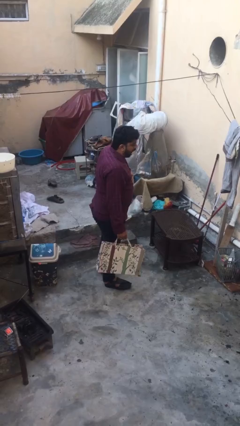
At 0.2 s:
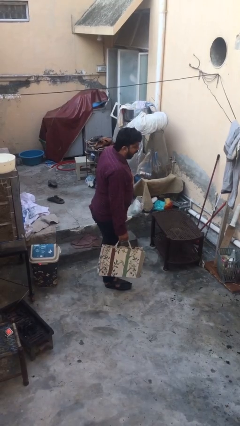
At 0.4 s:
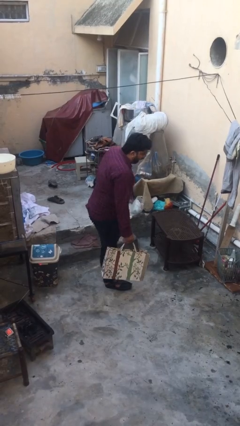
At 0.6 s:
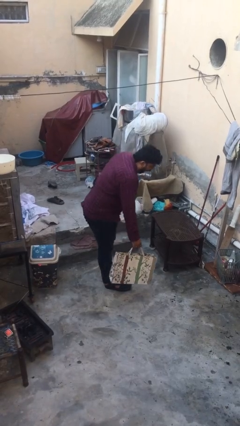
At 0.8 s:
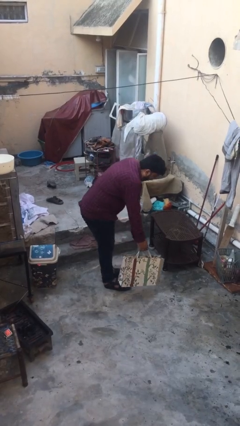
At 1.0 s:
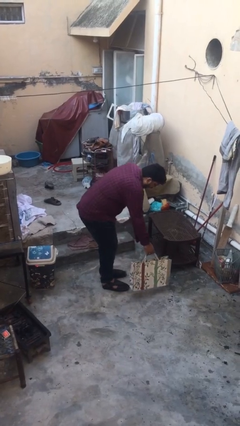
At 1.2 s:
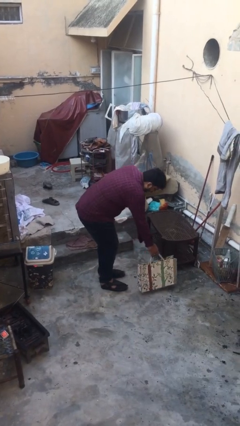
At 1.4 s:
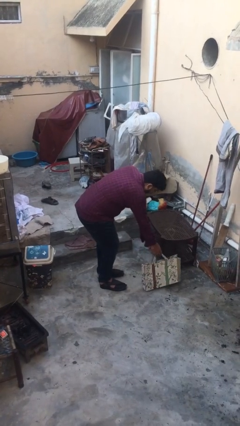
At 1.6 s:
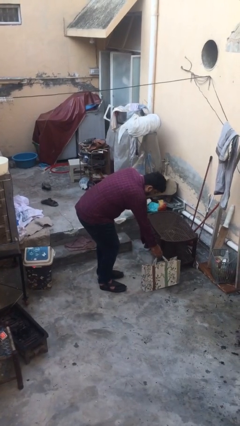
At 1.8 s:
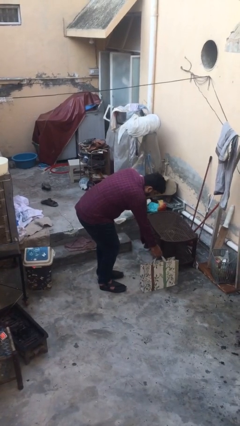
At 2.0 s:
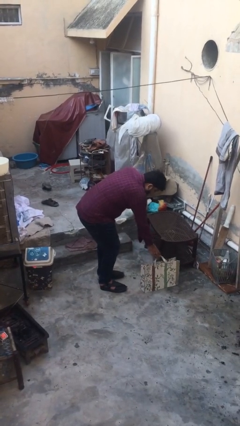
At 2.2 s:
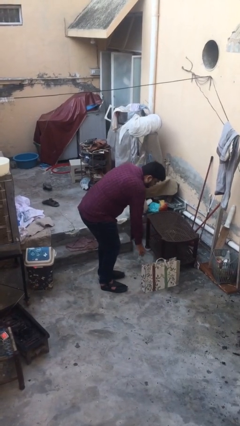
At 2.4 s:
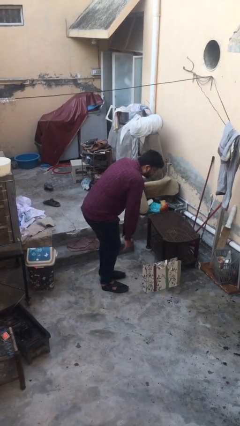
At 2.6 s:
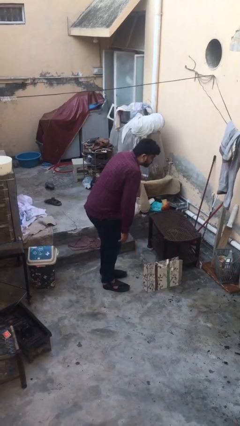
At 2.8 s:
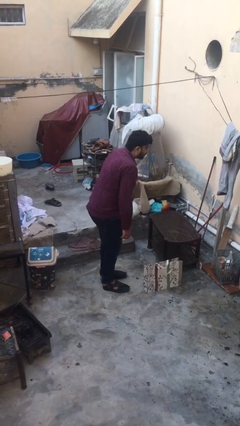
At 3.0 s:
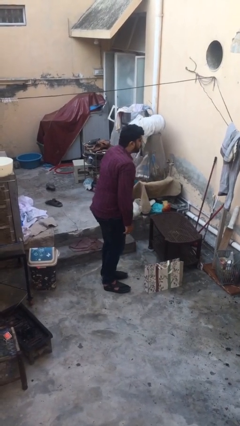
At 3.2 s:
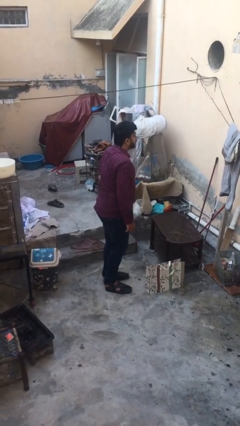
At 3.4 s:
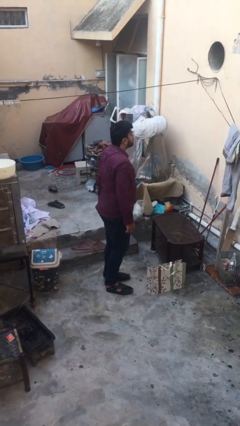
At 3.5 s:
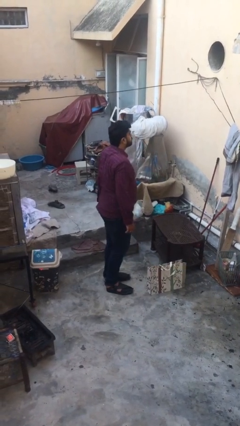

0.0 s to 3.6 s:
person puts down object on floor

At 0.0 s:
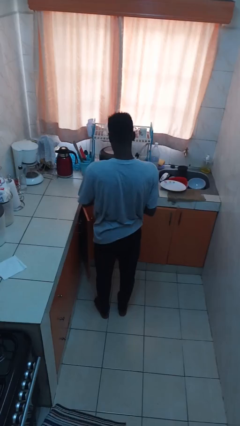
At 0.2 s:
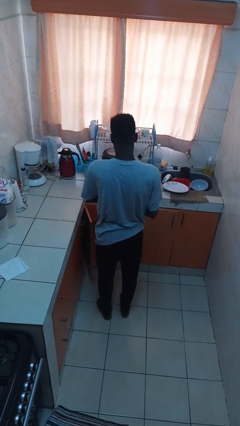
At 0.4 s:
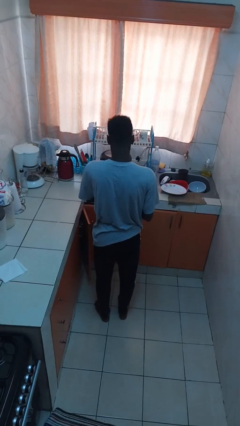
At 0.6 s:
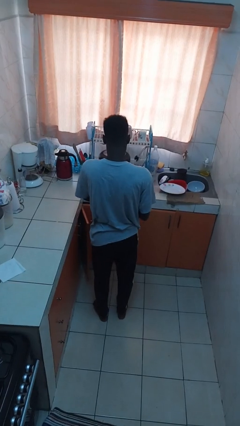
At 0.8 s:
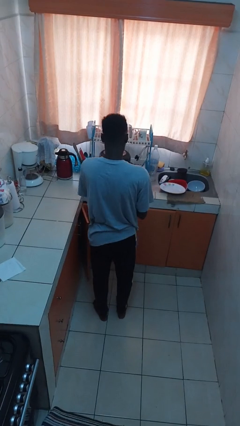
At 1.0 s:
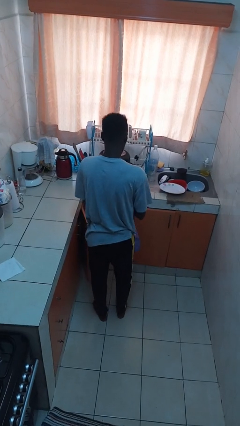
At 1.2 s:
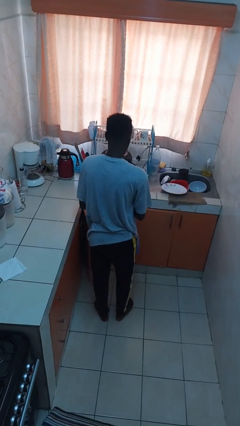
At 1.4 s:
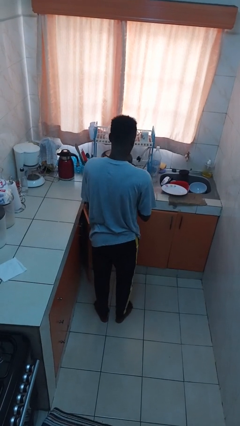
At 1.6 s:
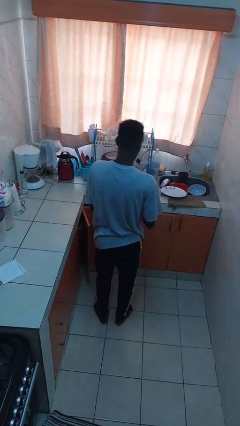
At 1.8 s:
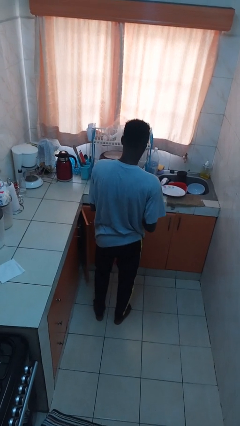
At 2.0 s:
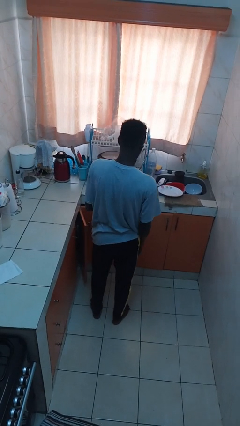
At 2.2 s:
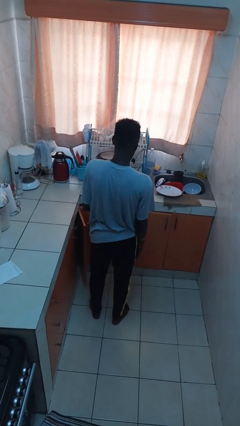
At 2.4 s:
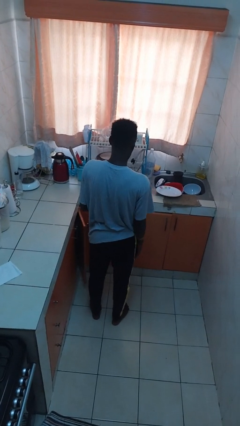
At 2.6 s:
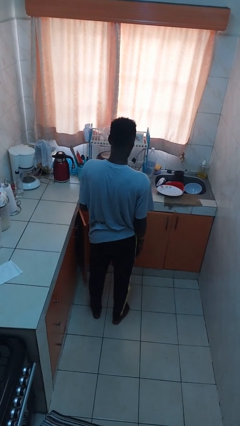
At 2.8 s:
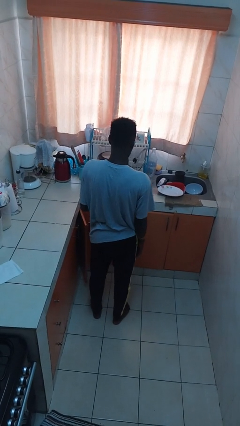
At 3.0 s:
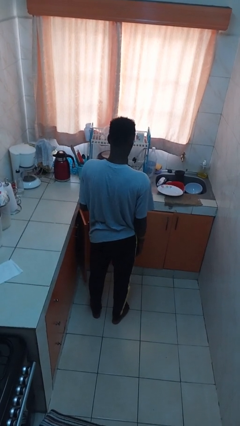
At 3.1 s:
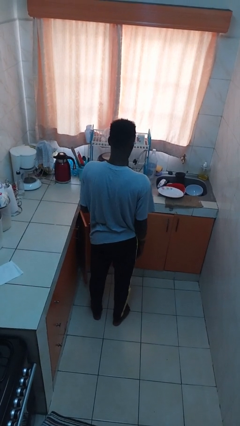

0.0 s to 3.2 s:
person puts object into bag

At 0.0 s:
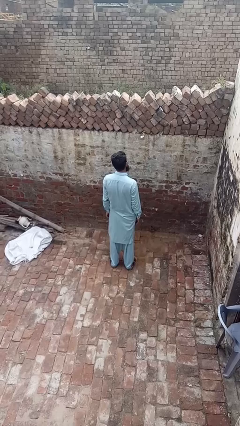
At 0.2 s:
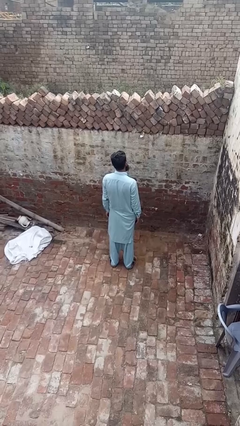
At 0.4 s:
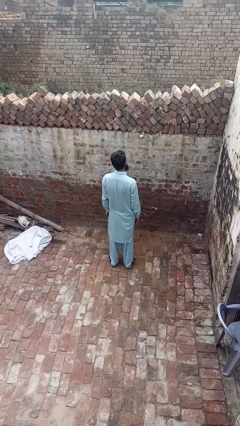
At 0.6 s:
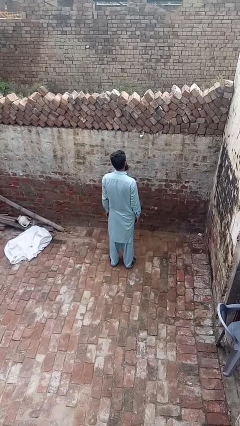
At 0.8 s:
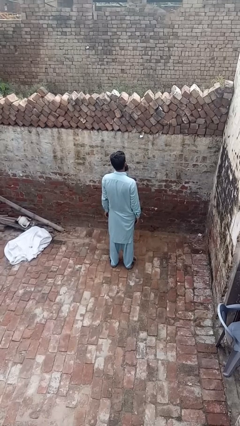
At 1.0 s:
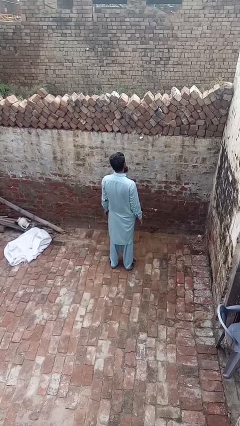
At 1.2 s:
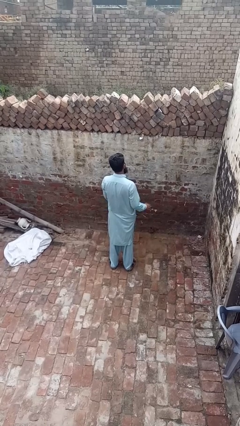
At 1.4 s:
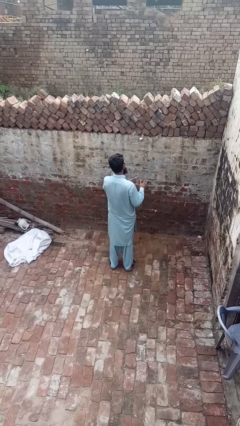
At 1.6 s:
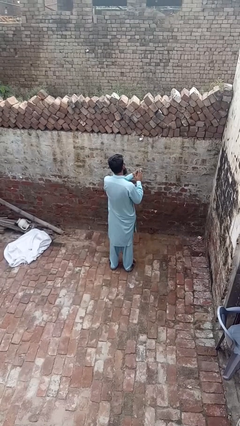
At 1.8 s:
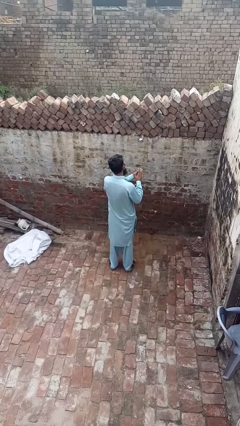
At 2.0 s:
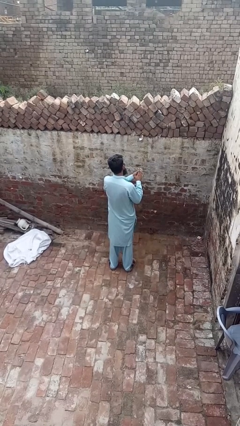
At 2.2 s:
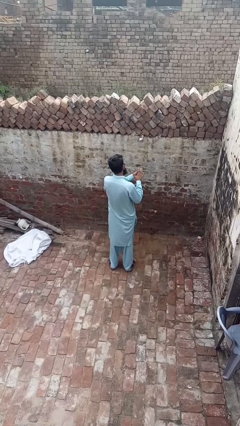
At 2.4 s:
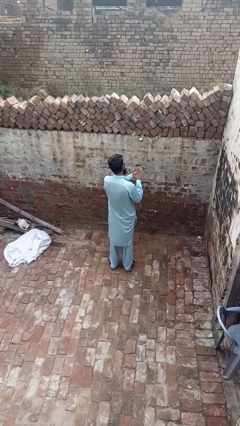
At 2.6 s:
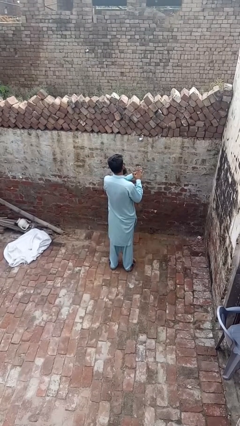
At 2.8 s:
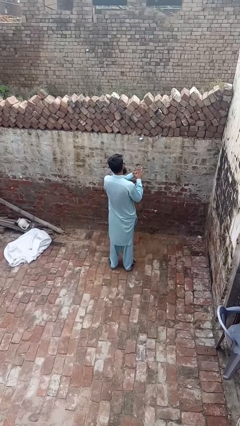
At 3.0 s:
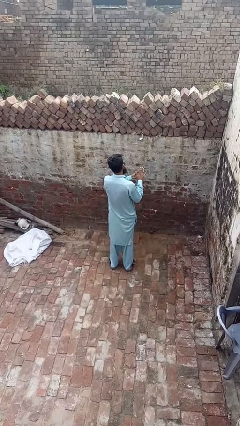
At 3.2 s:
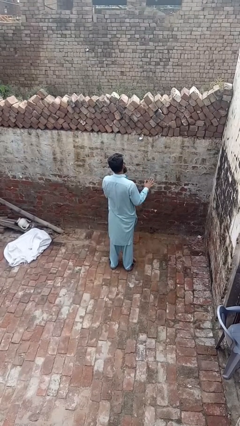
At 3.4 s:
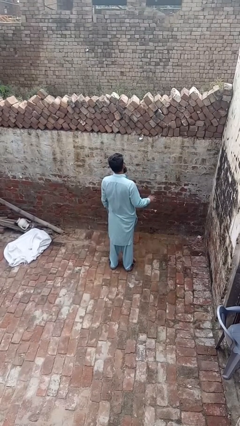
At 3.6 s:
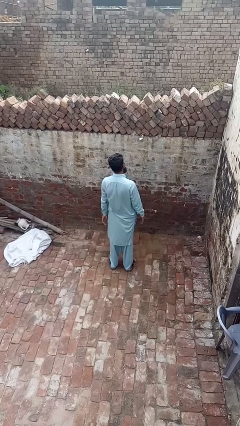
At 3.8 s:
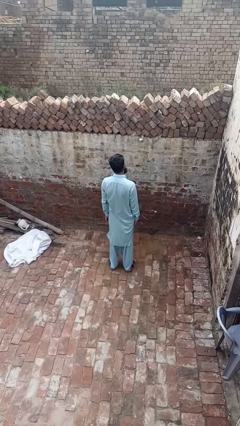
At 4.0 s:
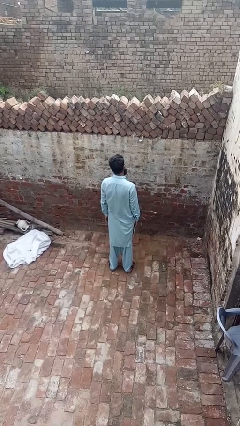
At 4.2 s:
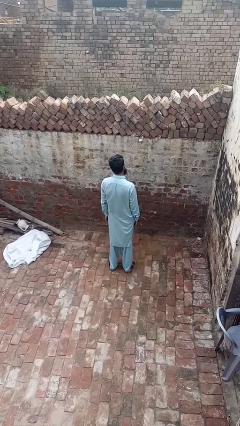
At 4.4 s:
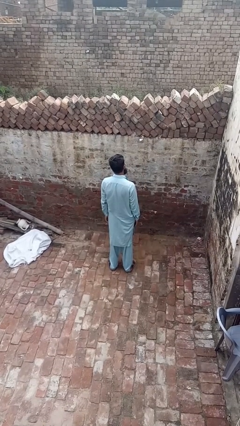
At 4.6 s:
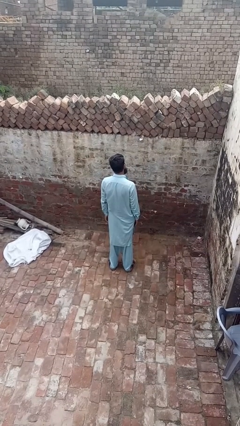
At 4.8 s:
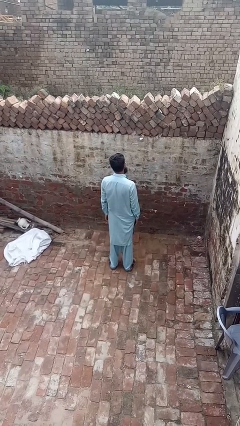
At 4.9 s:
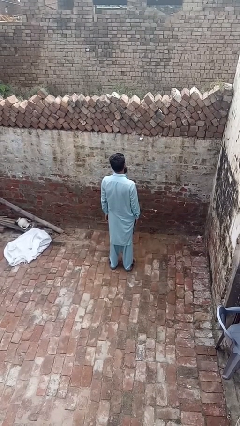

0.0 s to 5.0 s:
person puts on ring

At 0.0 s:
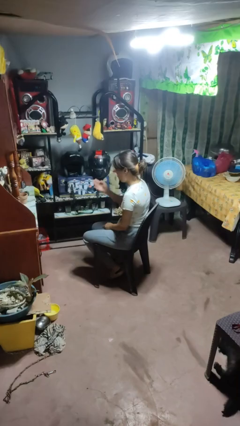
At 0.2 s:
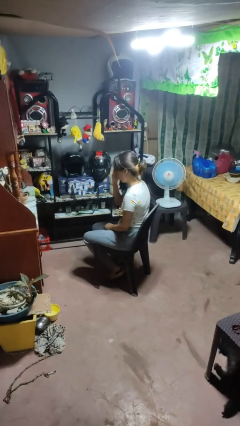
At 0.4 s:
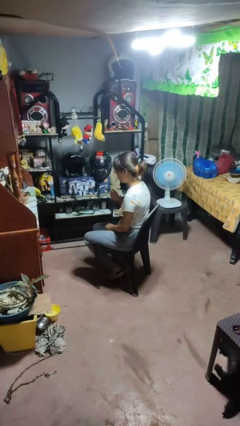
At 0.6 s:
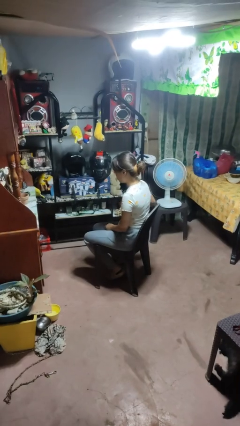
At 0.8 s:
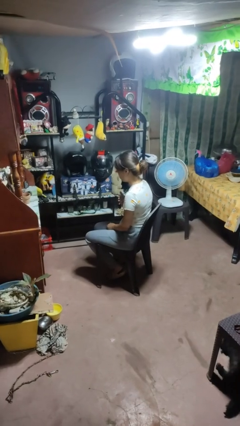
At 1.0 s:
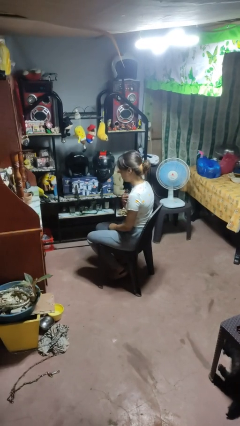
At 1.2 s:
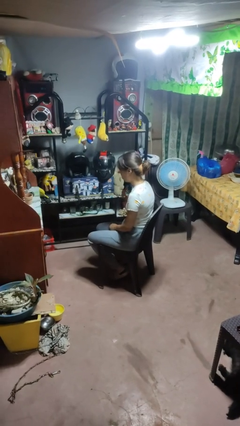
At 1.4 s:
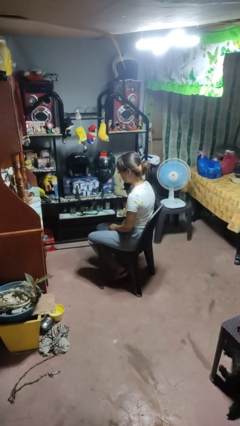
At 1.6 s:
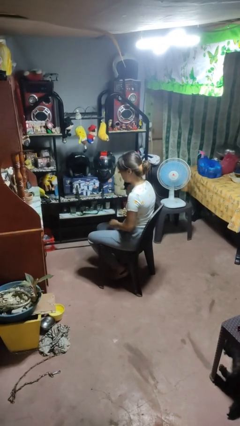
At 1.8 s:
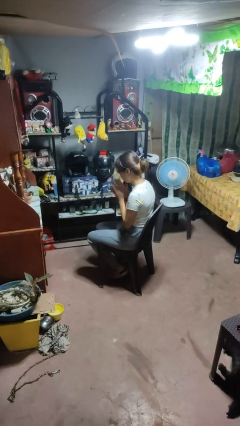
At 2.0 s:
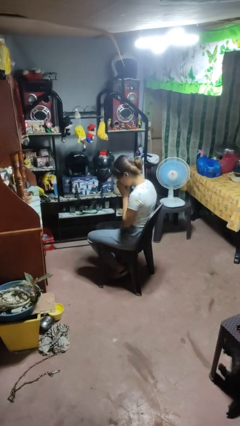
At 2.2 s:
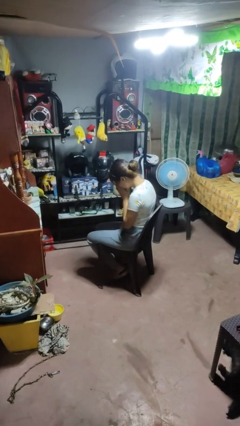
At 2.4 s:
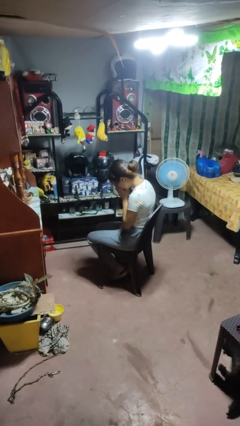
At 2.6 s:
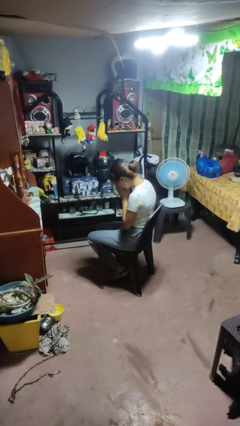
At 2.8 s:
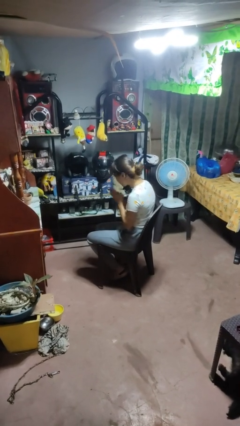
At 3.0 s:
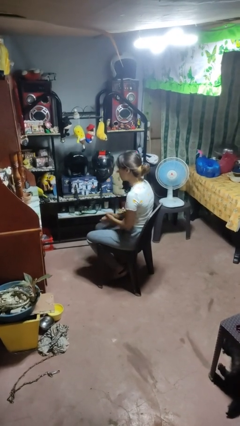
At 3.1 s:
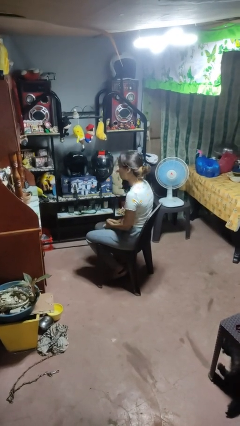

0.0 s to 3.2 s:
person prays

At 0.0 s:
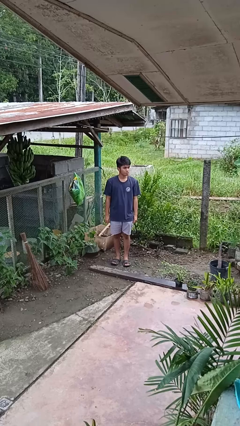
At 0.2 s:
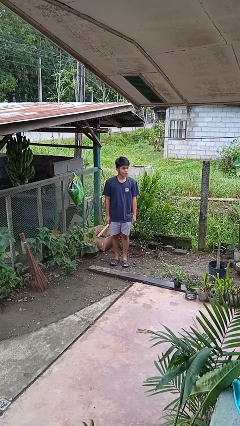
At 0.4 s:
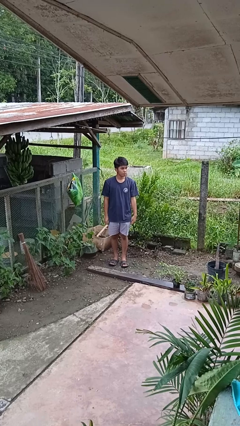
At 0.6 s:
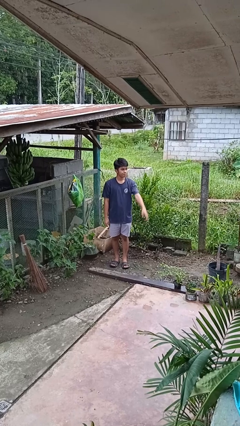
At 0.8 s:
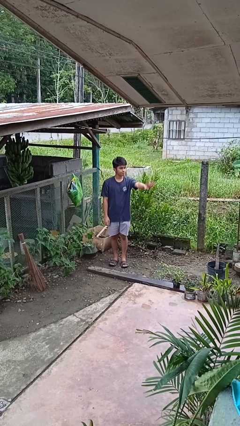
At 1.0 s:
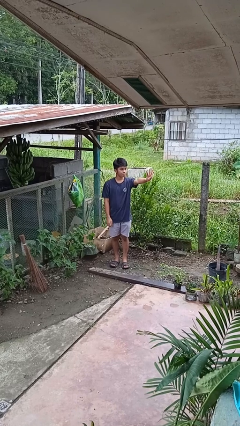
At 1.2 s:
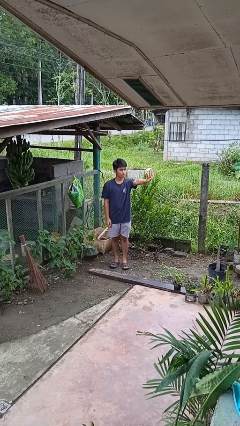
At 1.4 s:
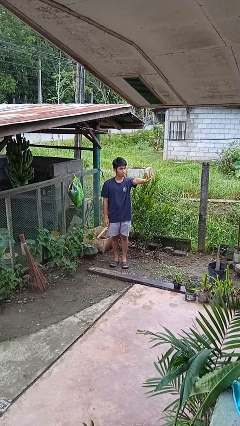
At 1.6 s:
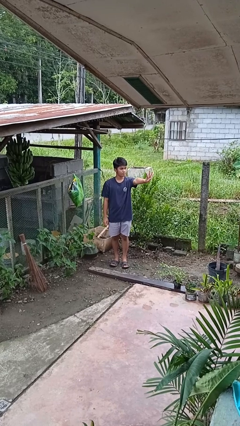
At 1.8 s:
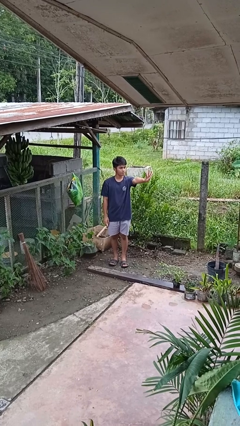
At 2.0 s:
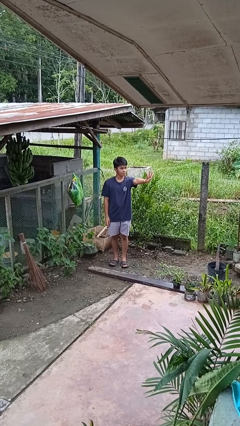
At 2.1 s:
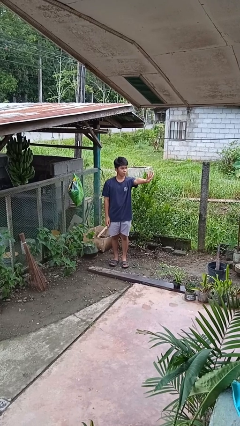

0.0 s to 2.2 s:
person gestures number four

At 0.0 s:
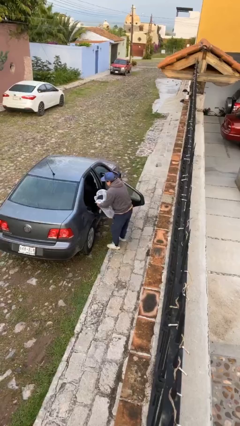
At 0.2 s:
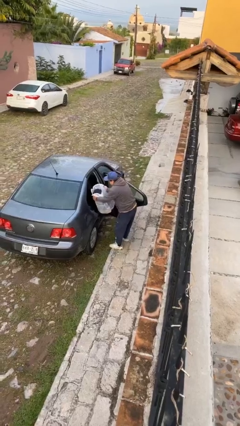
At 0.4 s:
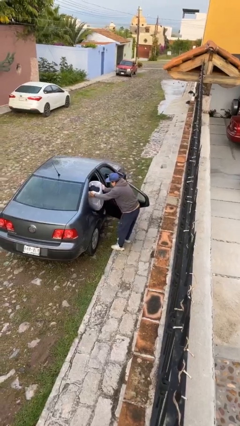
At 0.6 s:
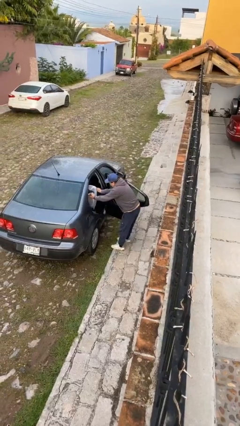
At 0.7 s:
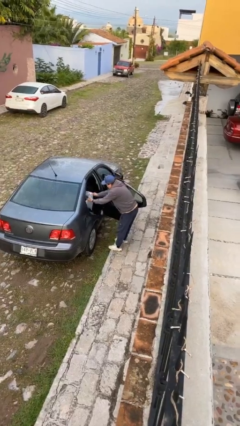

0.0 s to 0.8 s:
person loads car
